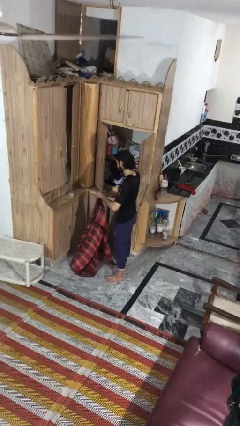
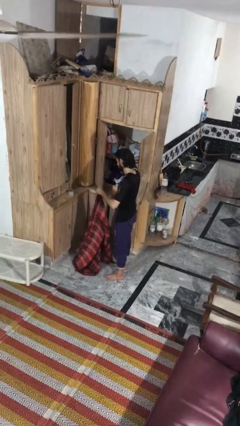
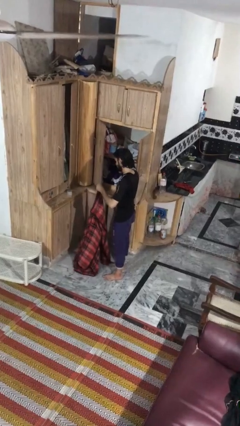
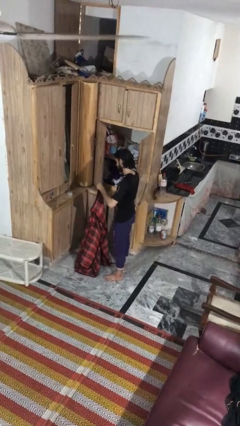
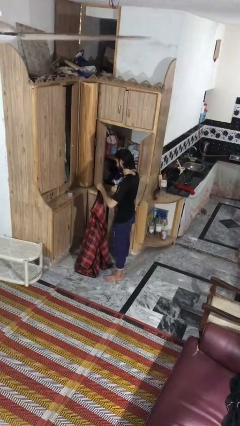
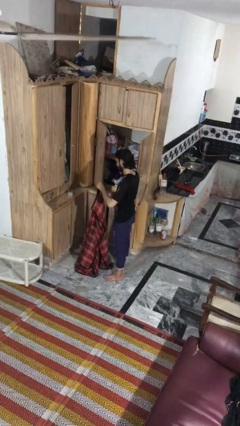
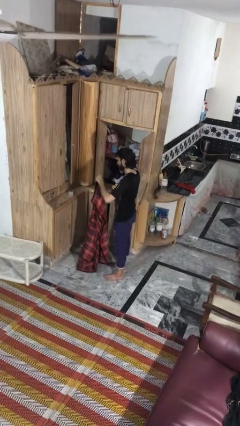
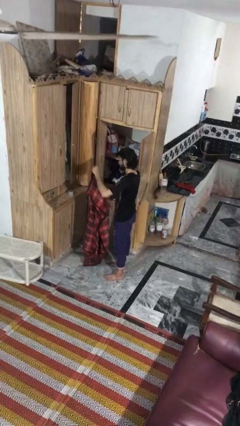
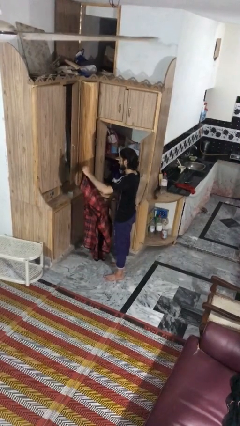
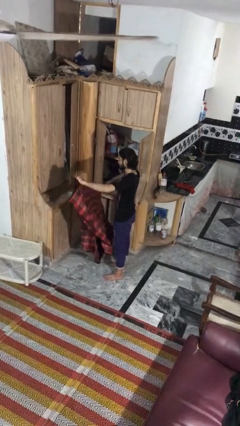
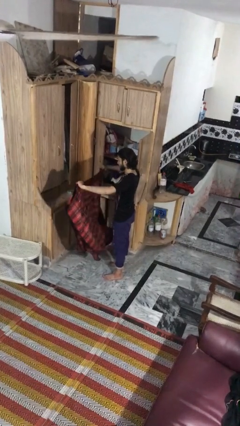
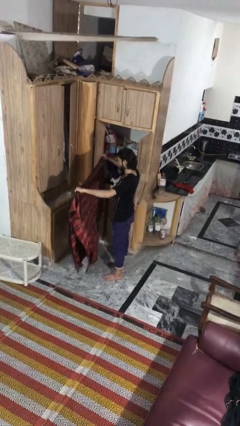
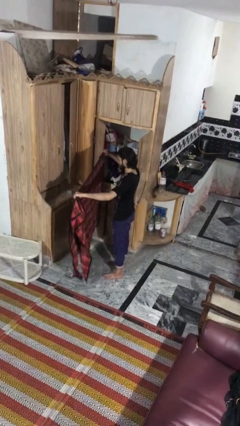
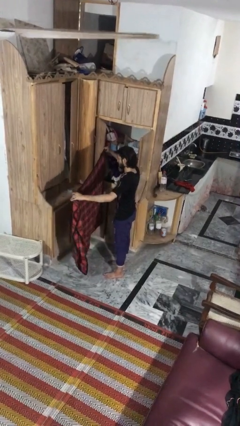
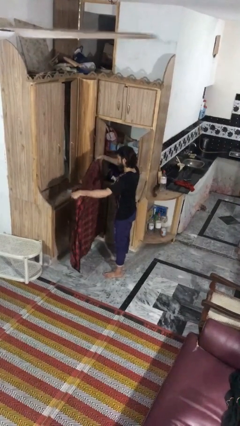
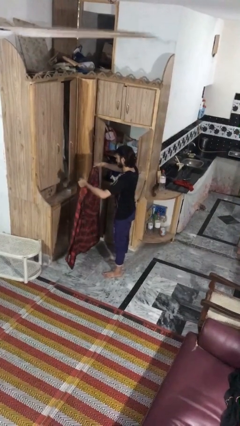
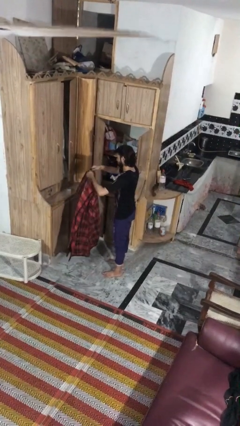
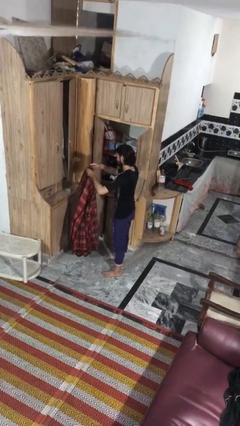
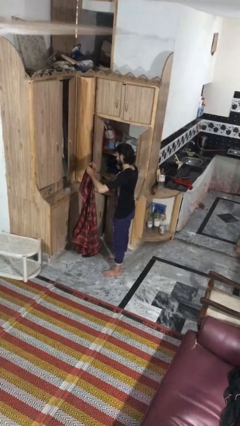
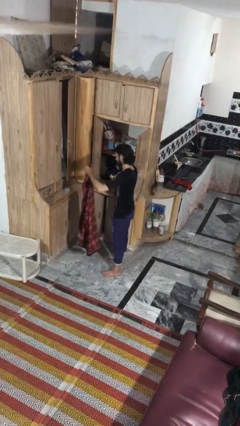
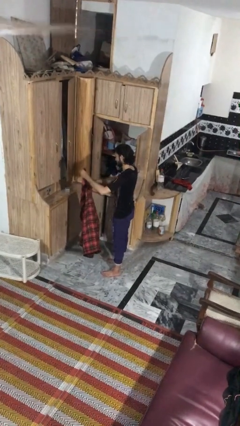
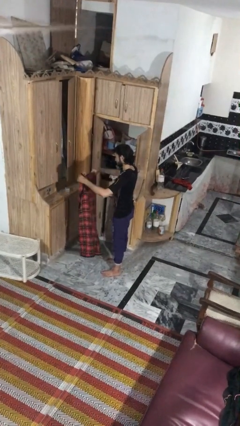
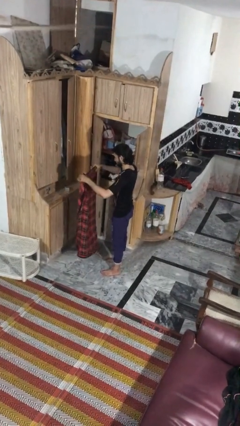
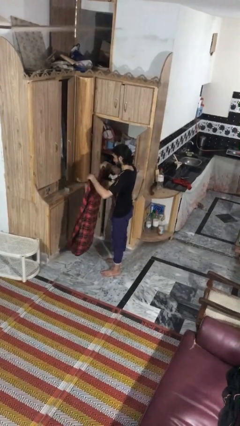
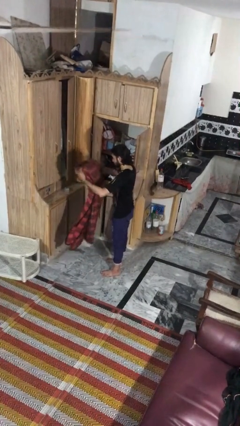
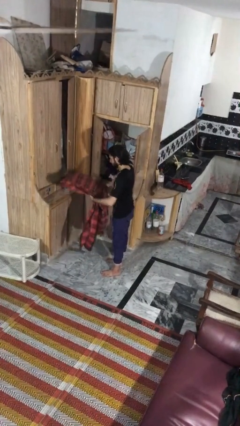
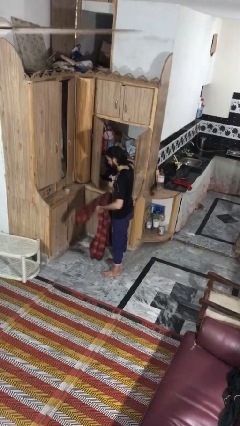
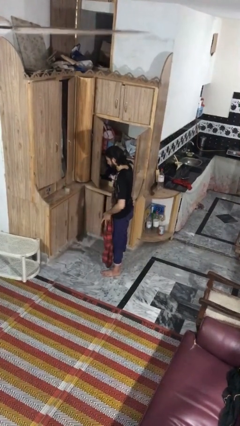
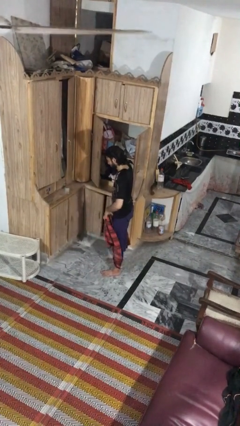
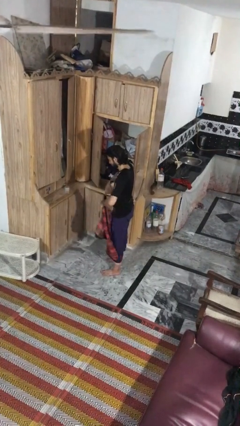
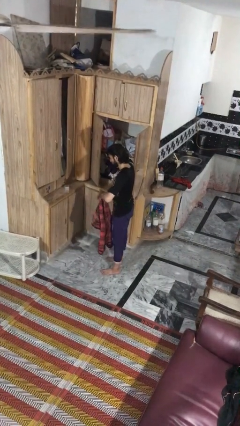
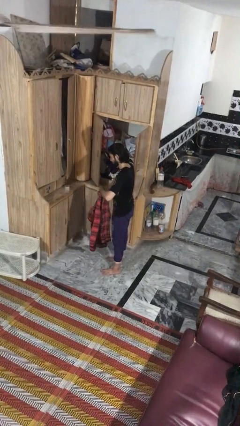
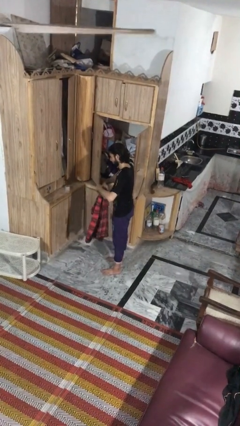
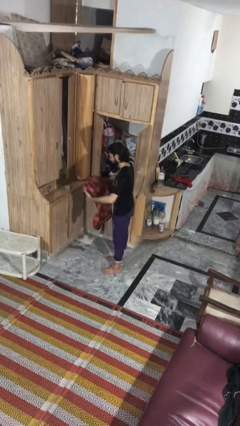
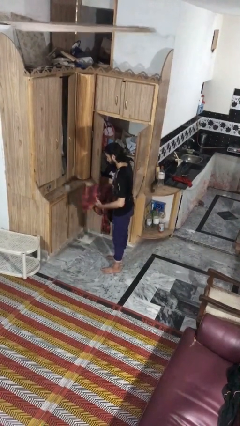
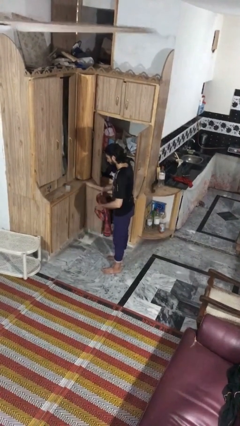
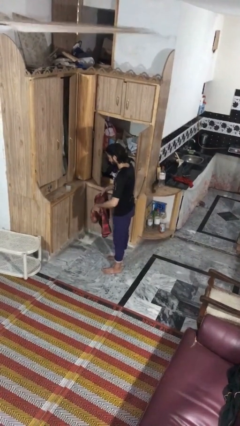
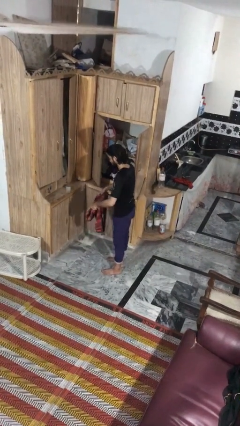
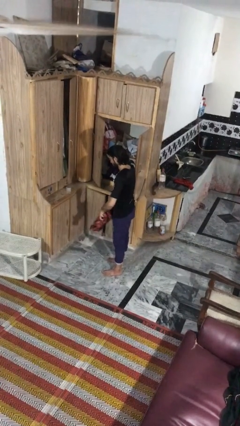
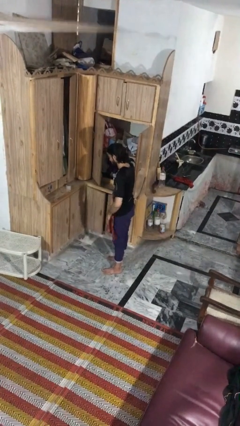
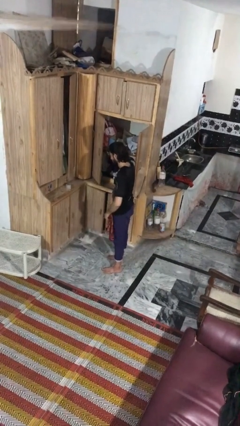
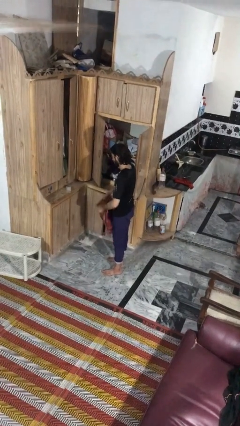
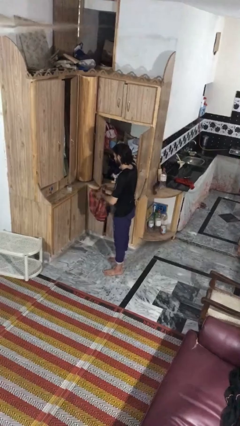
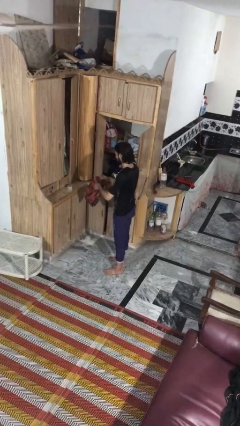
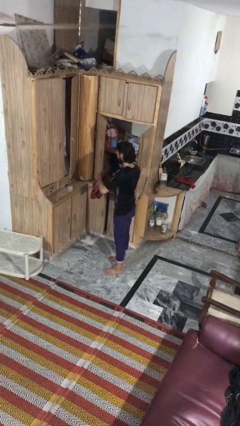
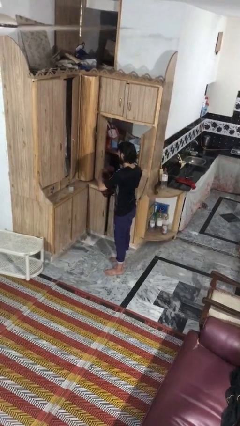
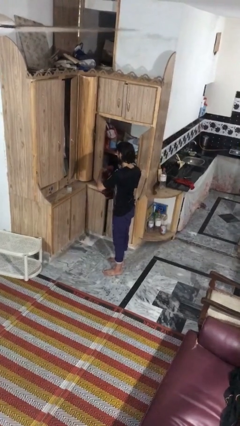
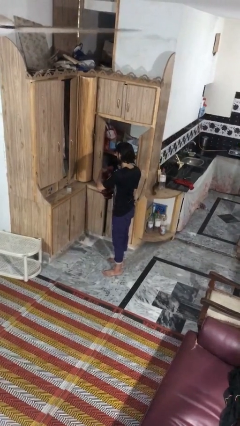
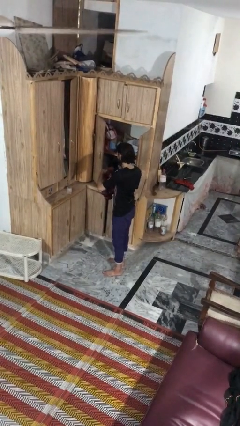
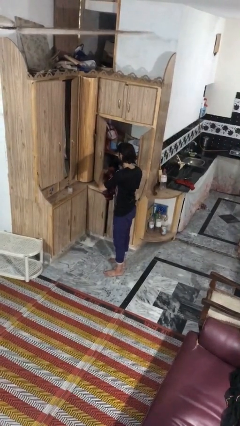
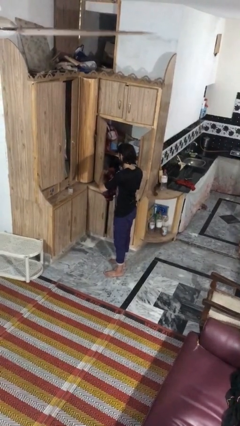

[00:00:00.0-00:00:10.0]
person folds blanket

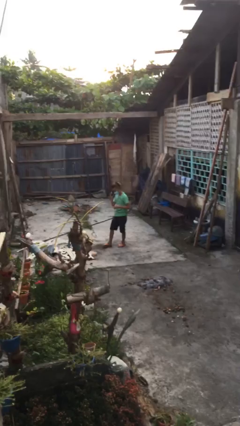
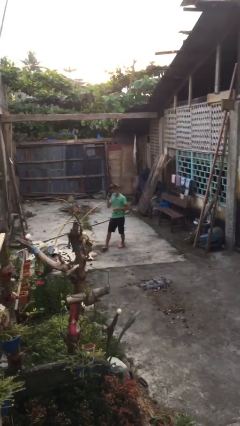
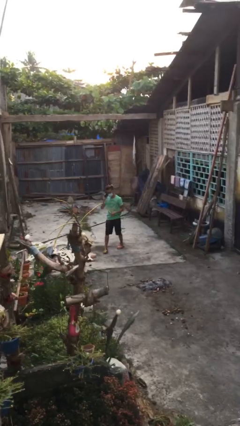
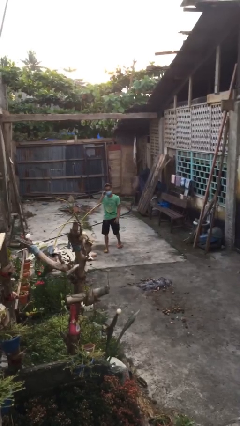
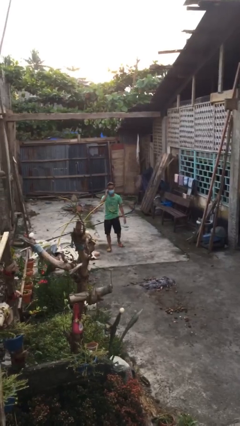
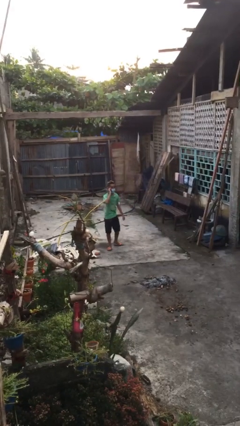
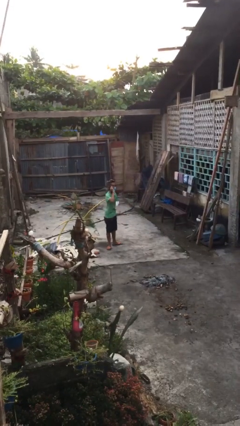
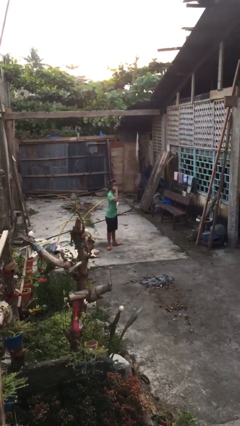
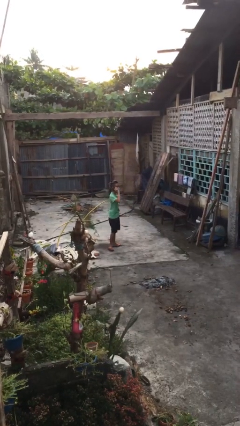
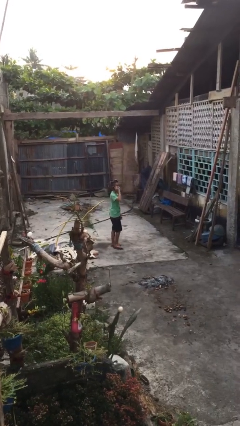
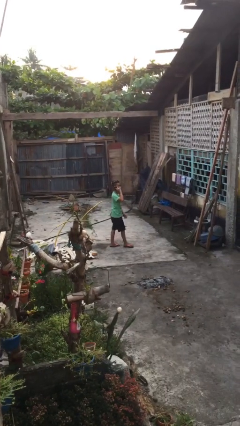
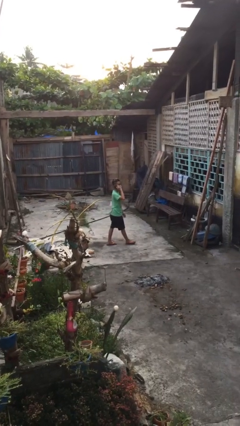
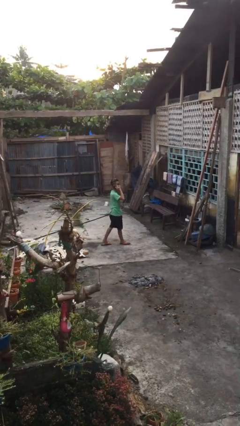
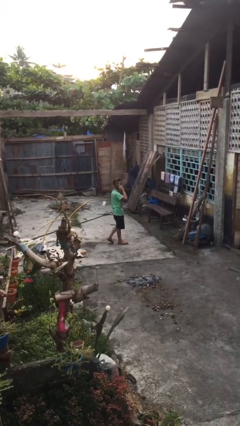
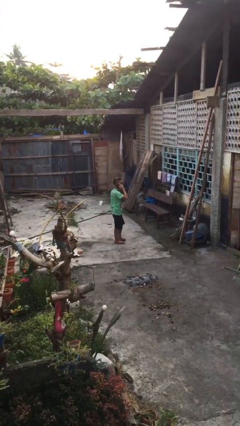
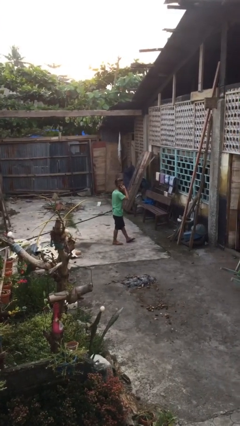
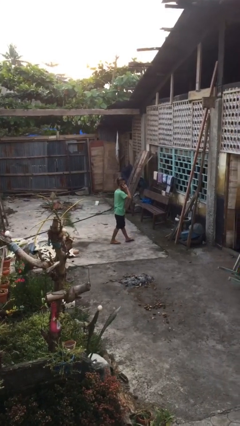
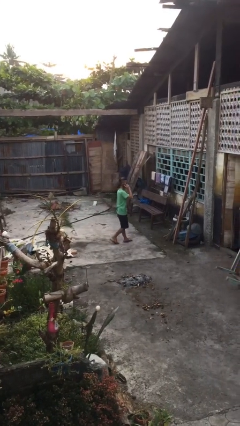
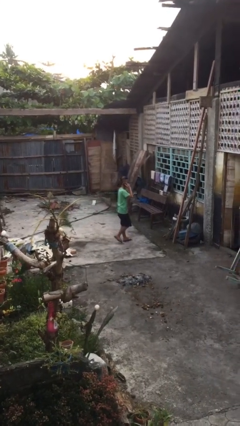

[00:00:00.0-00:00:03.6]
person talks on phone

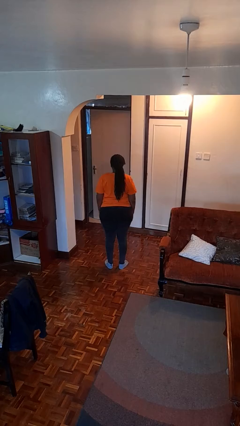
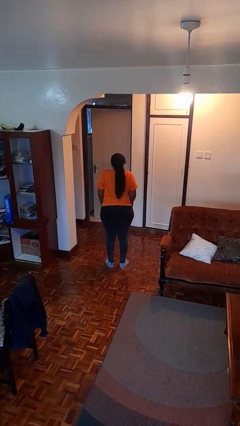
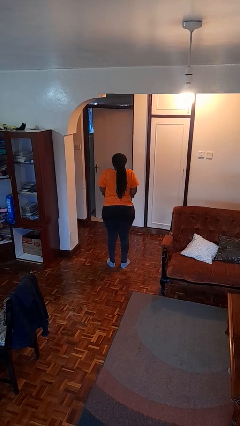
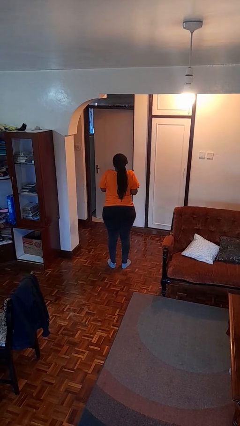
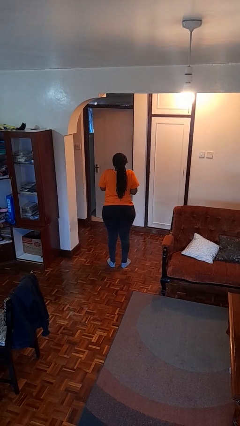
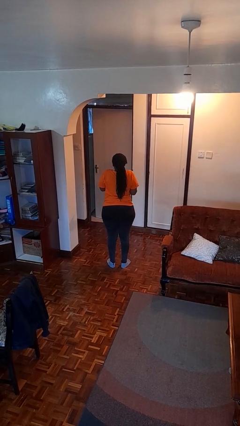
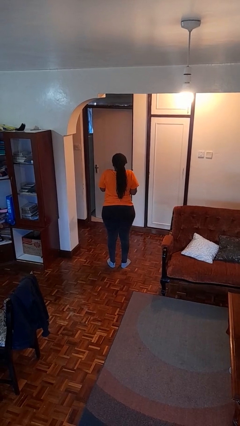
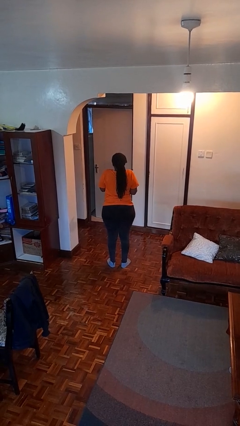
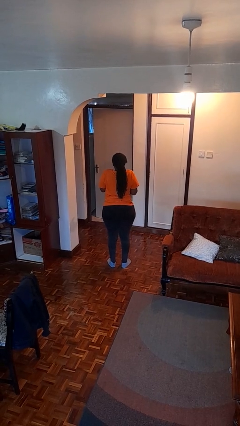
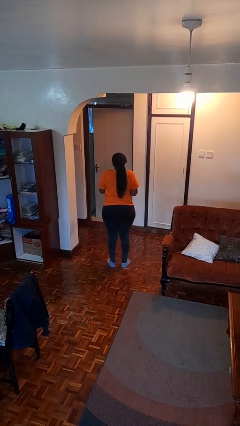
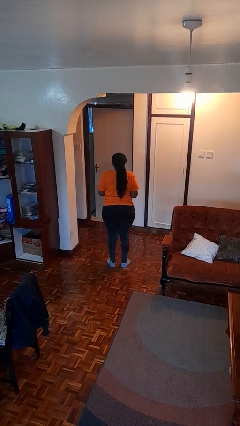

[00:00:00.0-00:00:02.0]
person shrugs

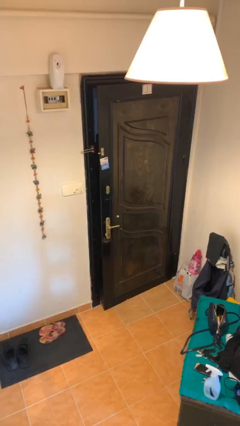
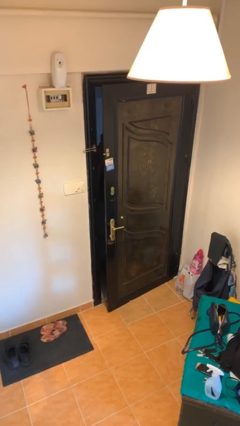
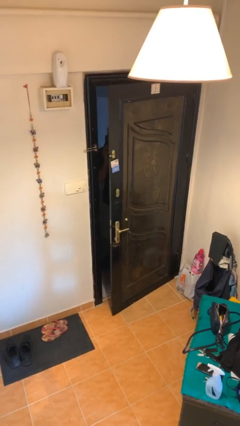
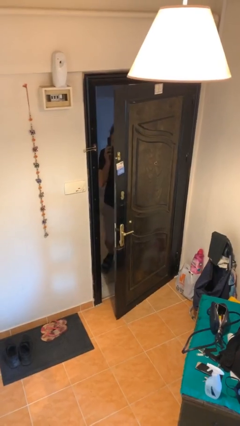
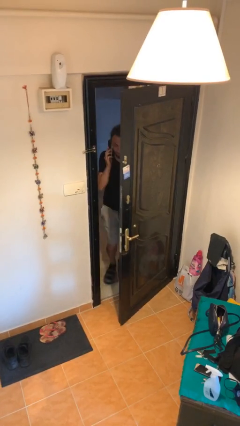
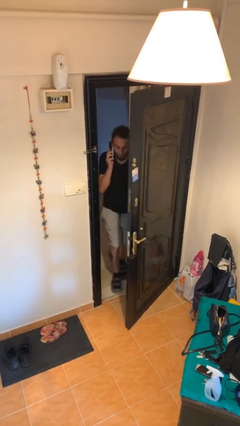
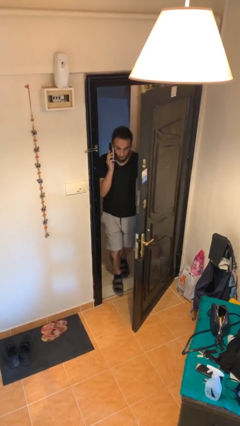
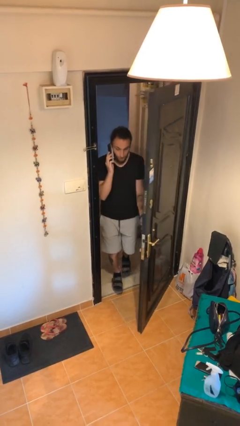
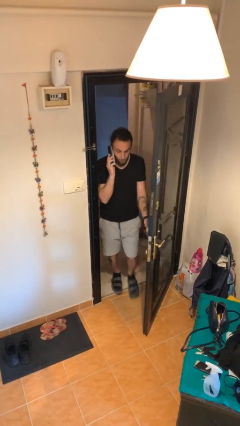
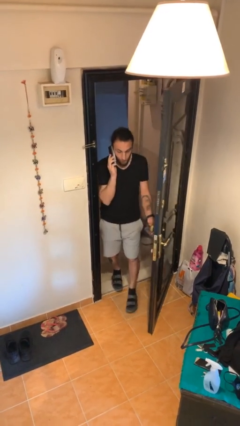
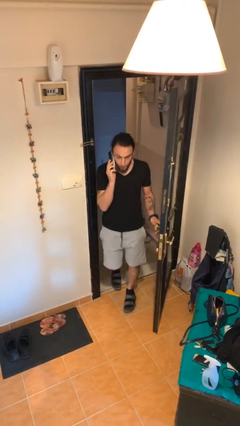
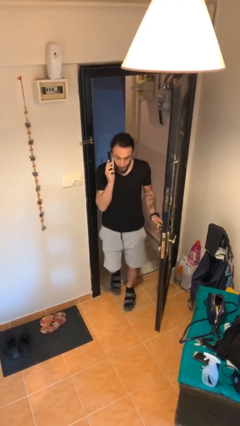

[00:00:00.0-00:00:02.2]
person opens facility door
